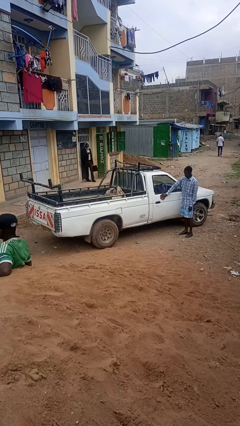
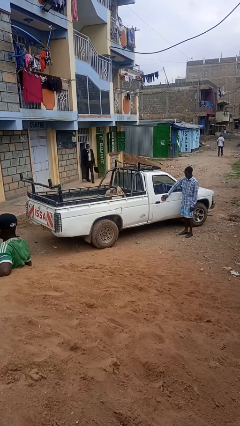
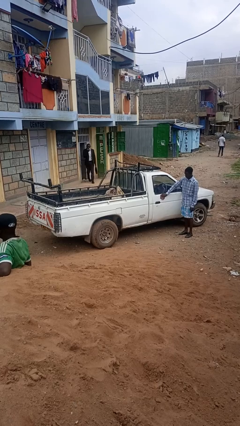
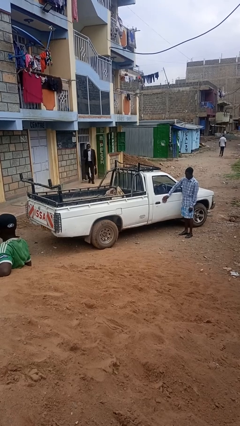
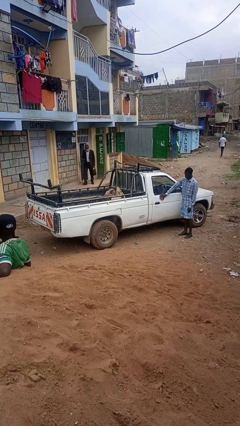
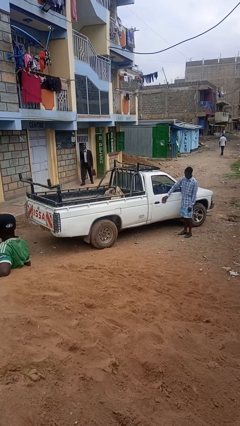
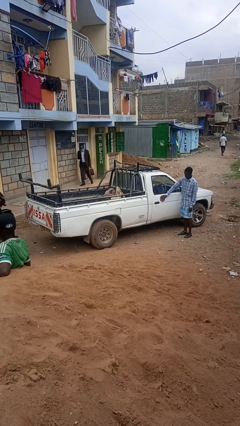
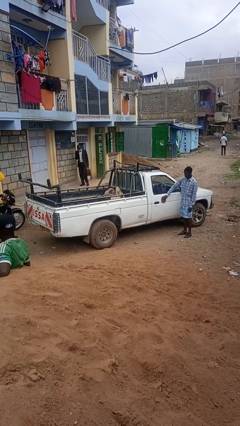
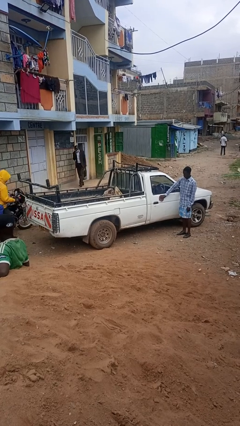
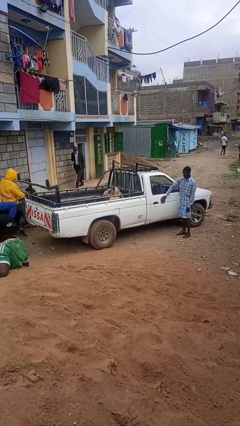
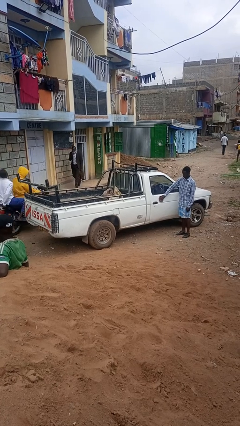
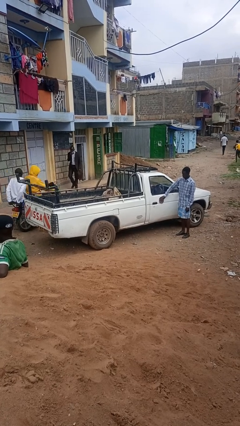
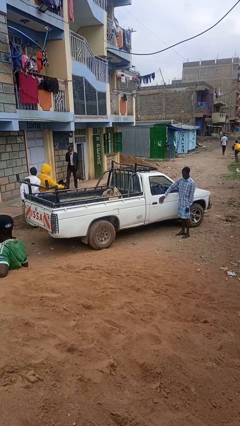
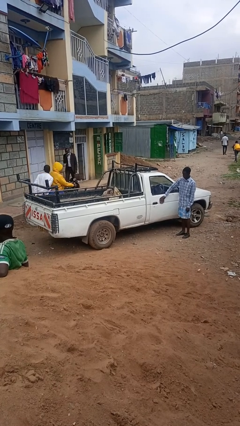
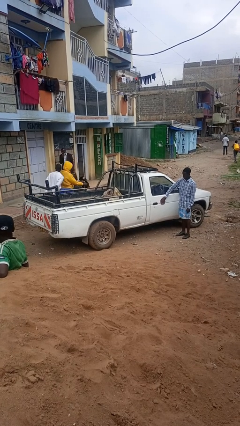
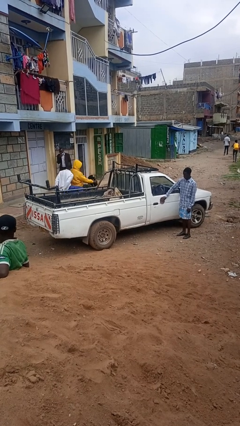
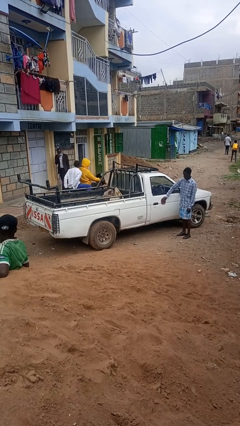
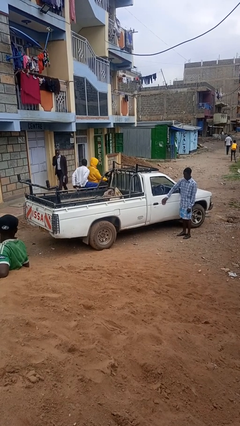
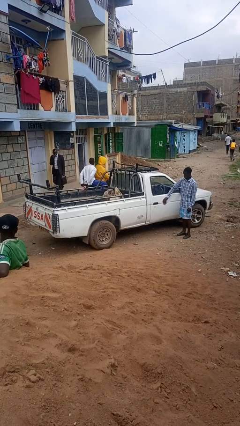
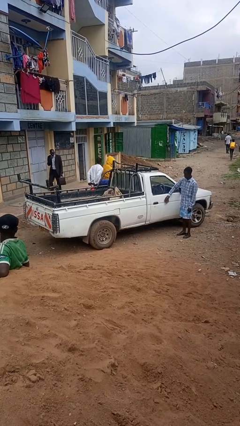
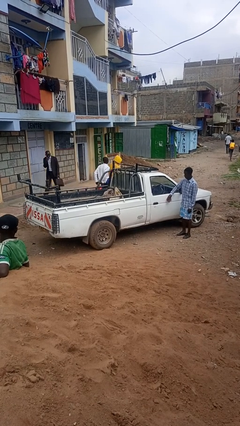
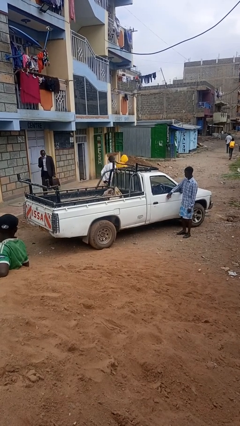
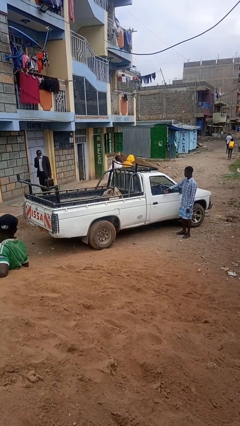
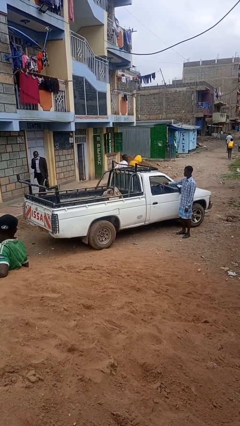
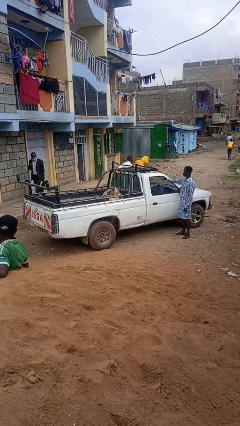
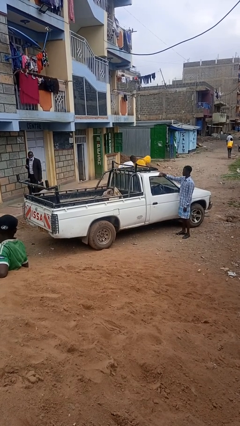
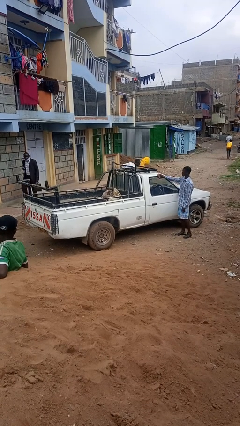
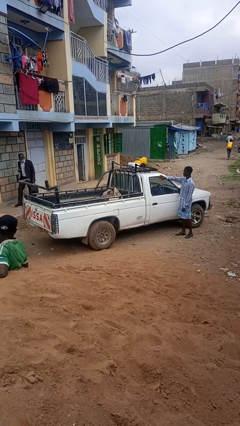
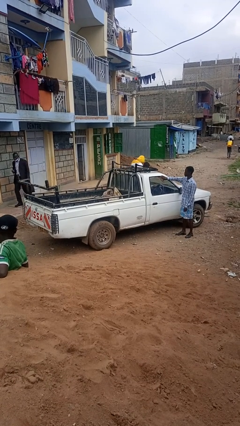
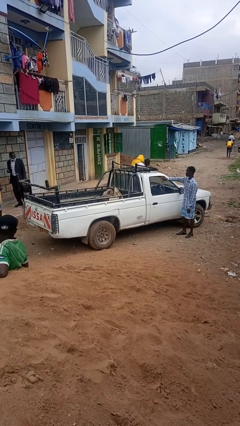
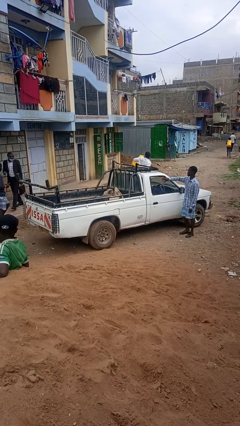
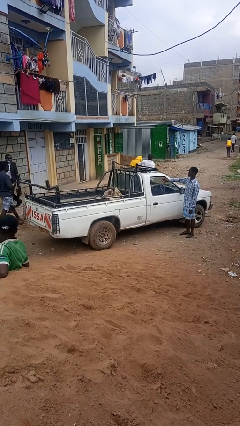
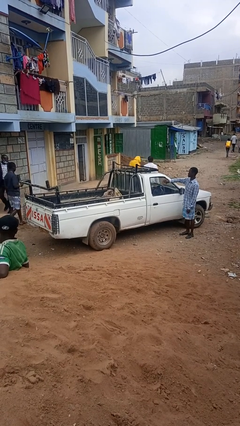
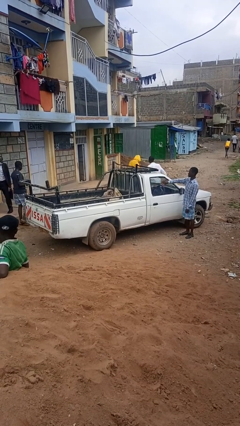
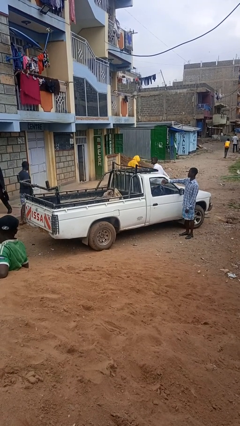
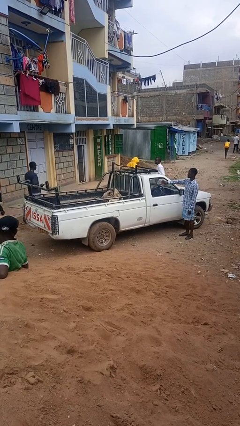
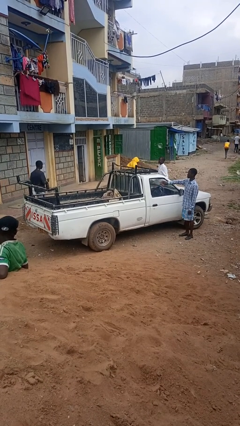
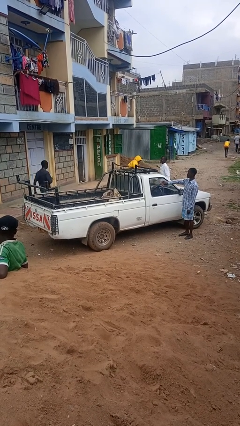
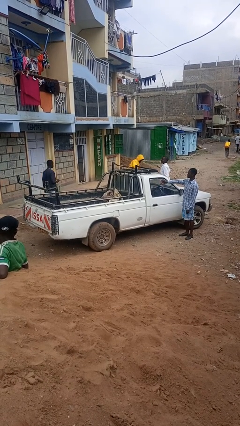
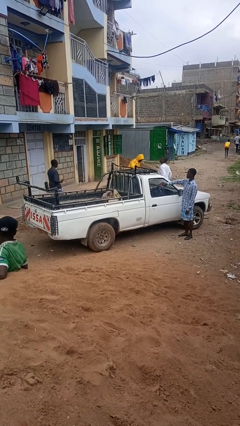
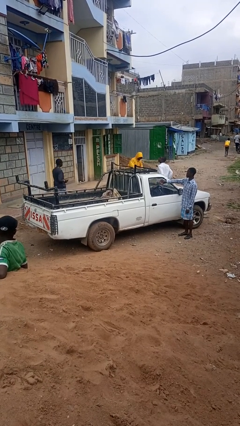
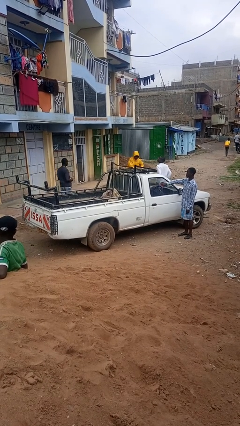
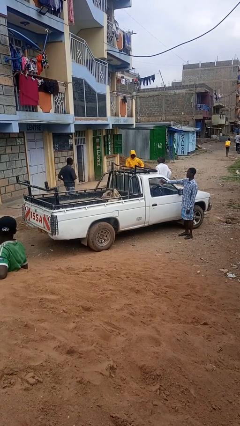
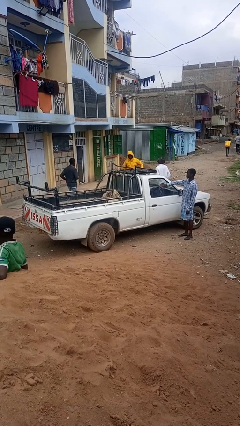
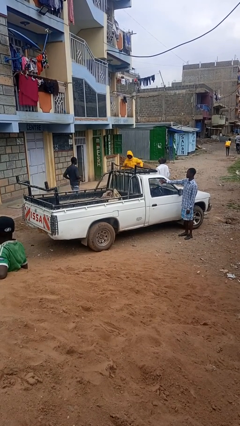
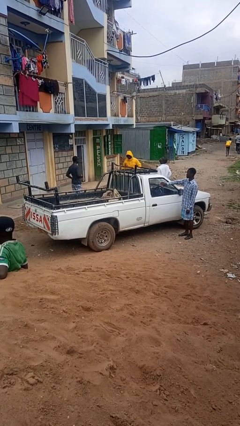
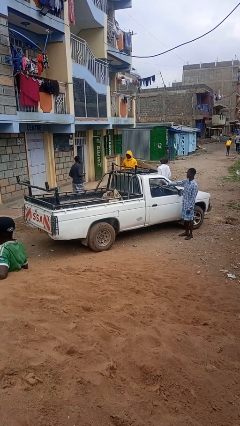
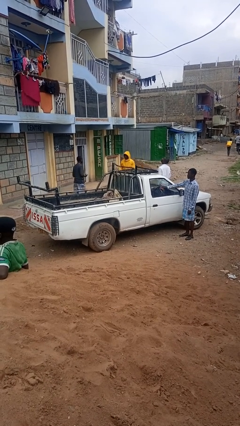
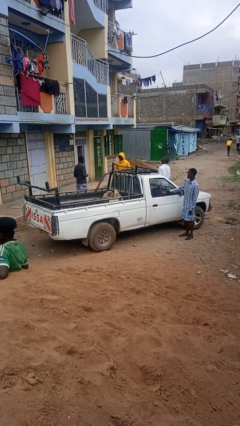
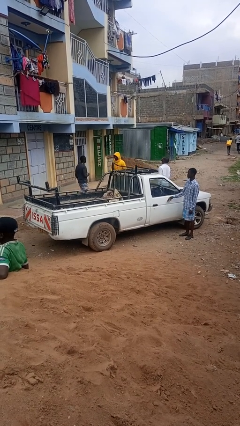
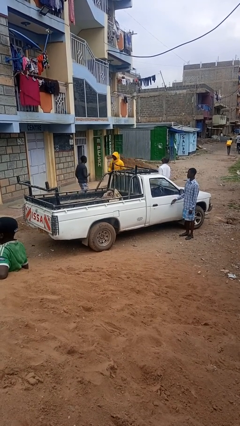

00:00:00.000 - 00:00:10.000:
person polishes car with rag

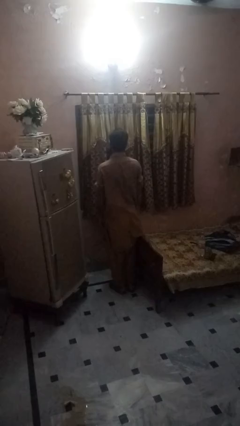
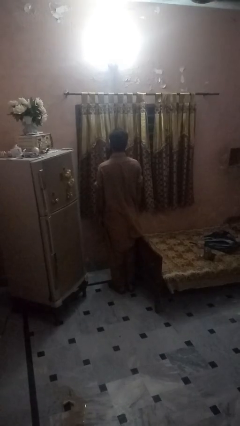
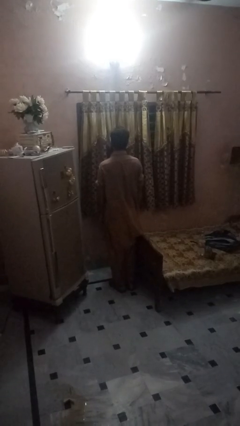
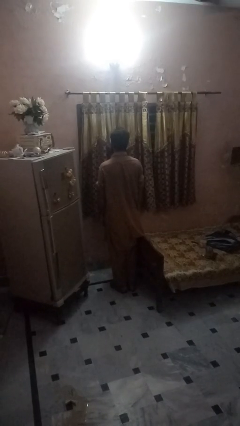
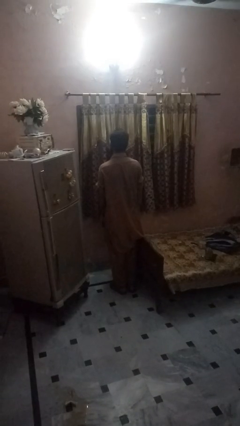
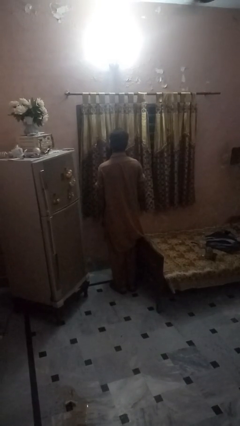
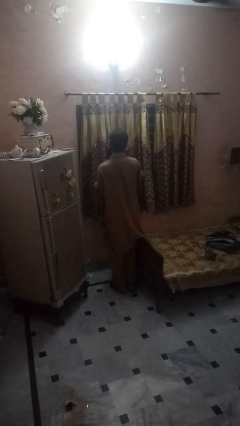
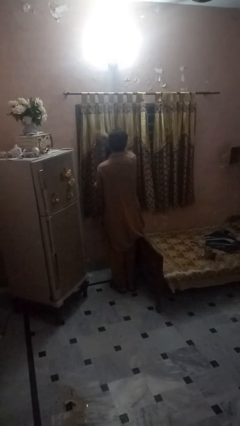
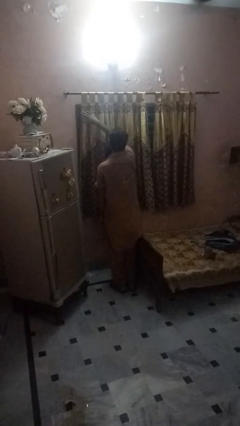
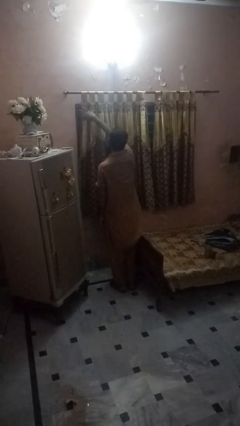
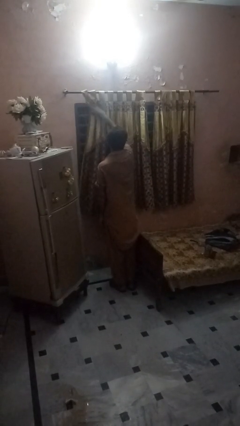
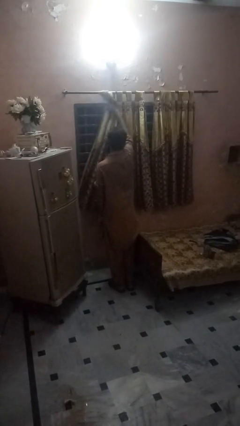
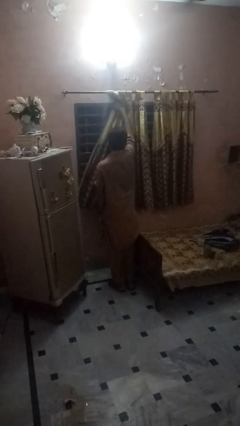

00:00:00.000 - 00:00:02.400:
person opens curtains

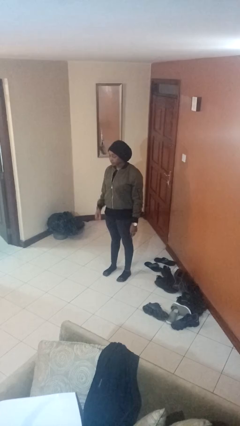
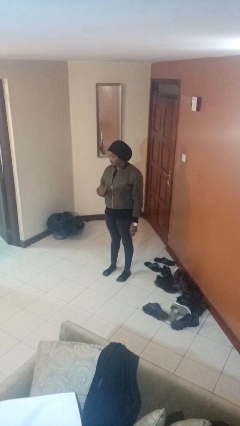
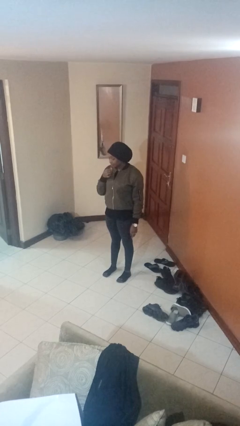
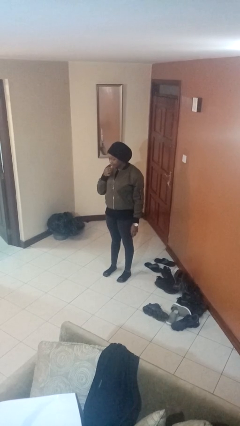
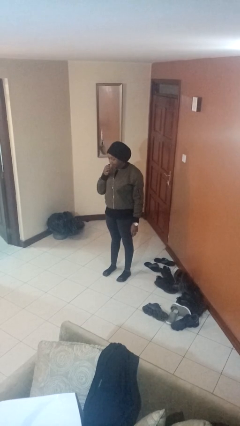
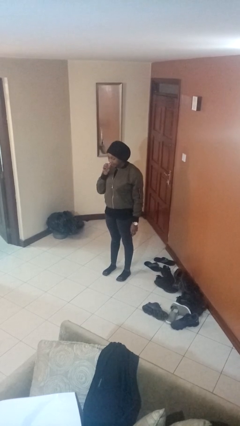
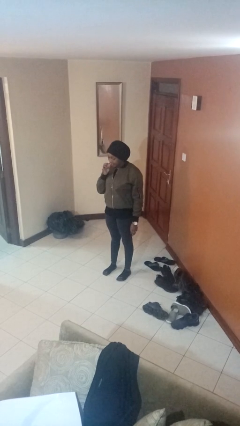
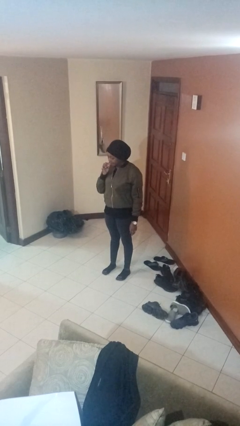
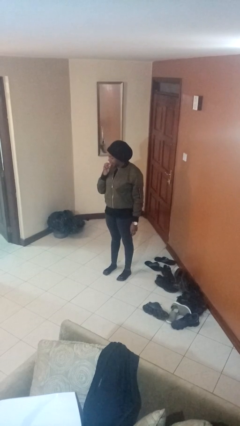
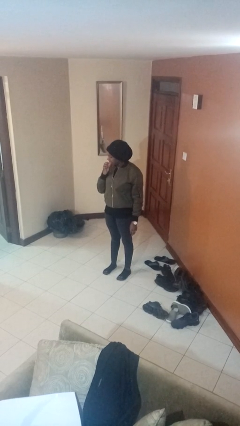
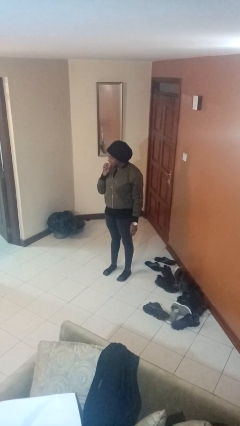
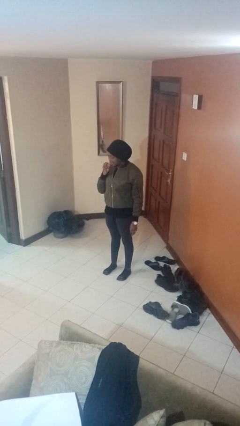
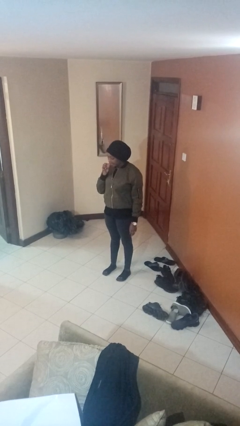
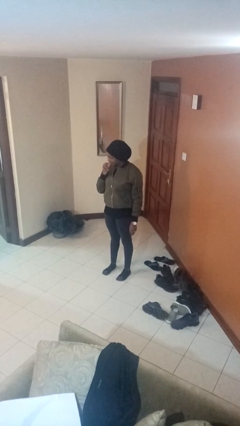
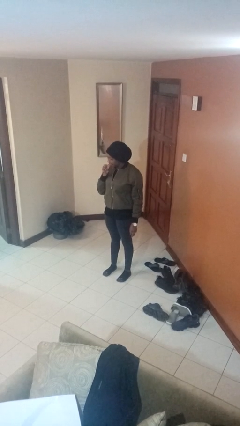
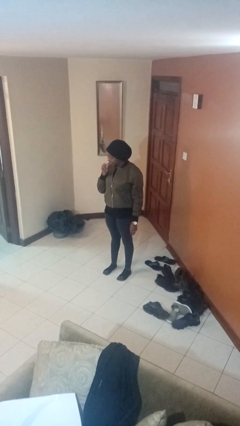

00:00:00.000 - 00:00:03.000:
person applies lip makeup

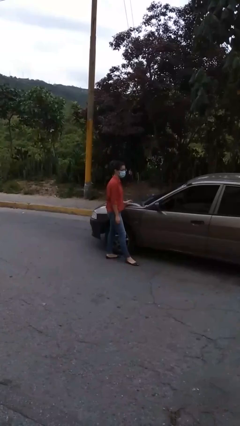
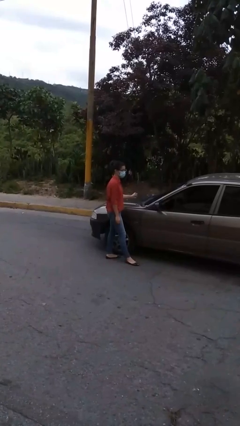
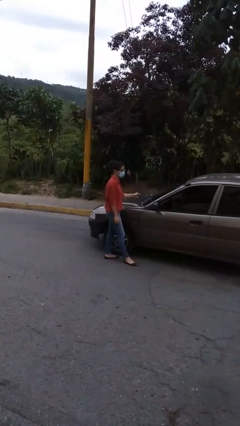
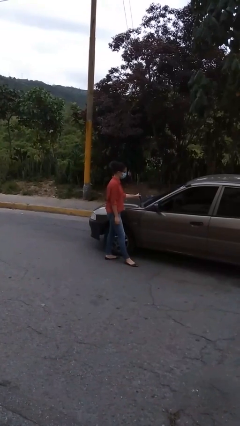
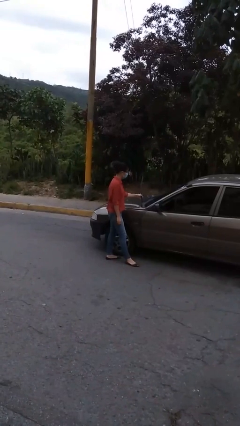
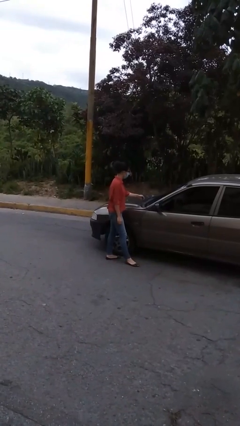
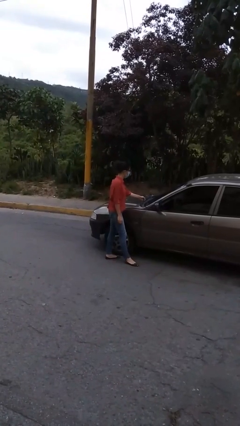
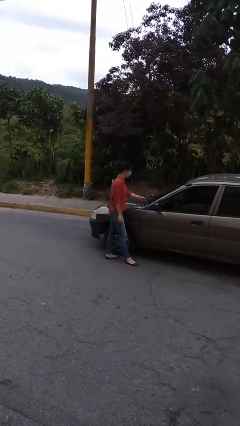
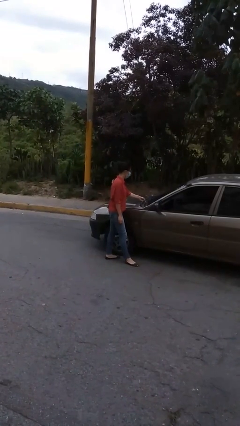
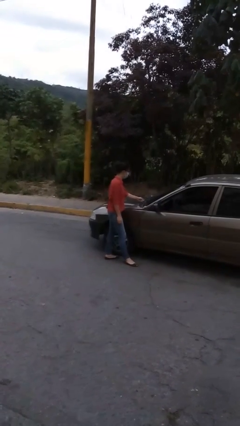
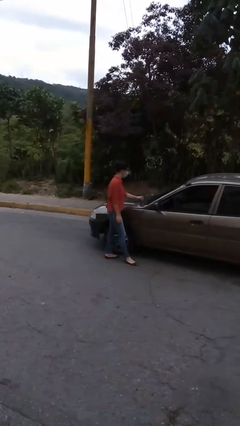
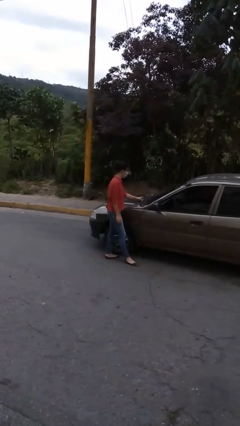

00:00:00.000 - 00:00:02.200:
person flips down car wipers
